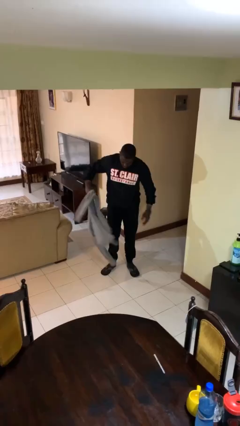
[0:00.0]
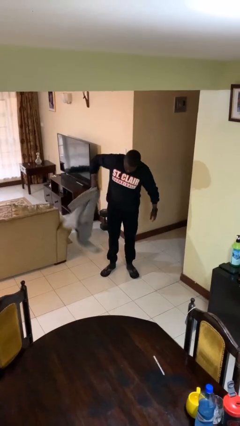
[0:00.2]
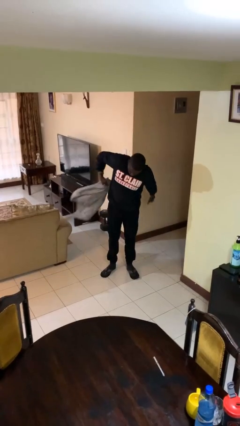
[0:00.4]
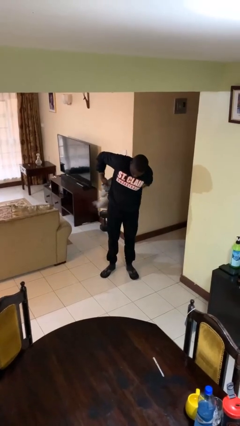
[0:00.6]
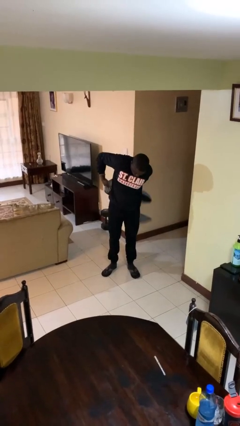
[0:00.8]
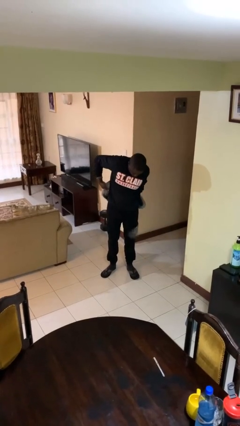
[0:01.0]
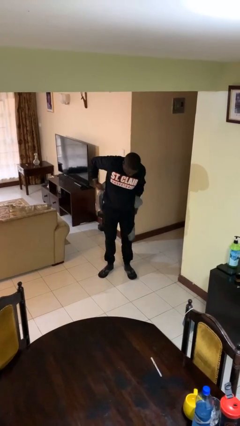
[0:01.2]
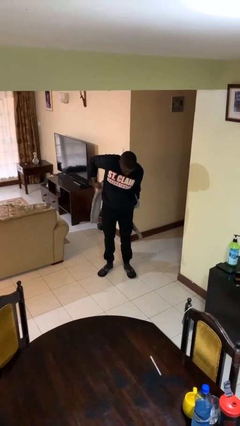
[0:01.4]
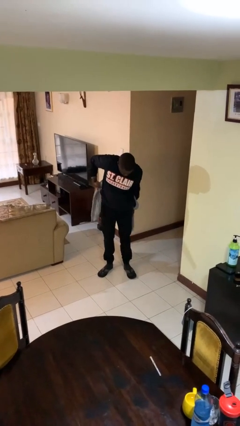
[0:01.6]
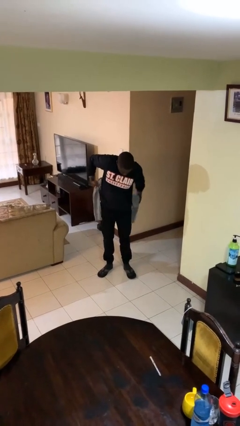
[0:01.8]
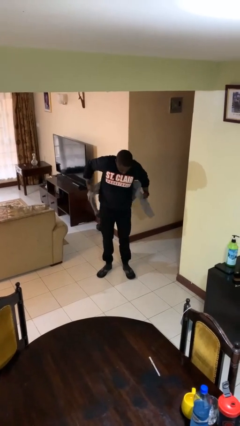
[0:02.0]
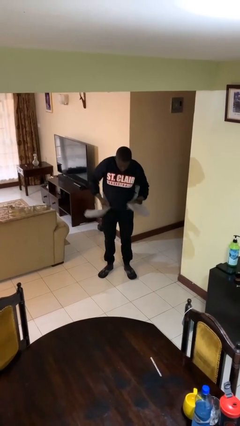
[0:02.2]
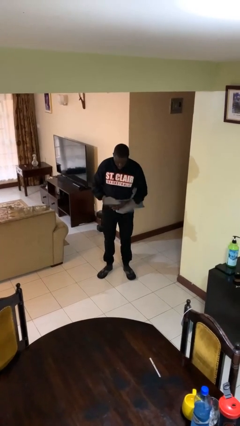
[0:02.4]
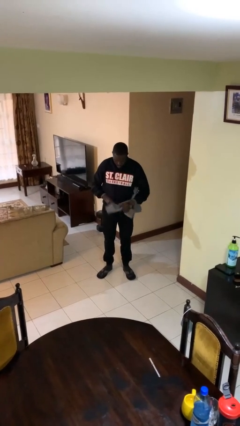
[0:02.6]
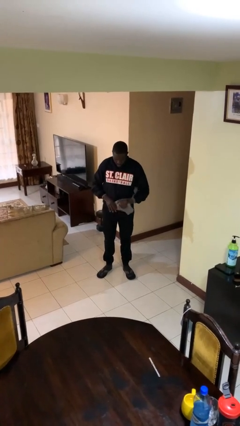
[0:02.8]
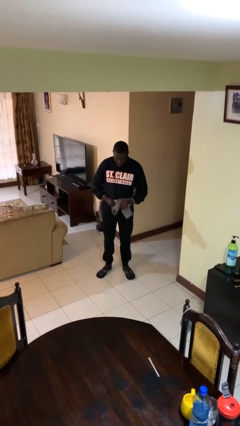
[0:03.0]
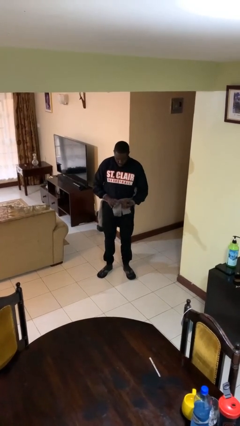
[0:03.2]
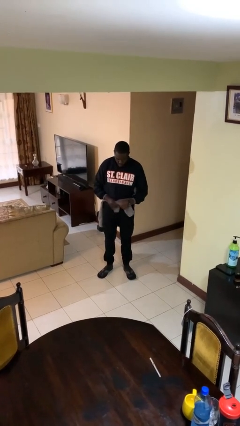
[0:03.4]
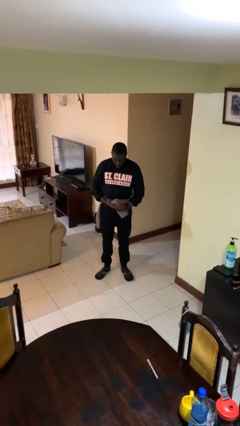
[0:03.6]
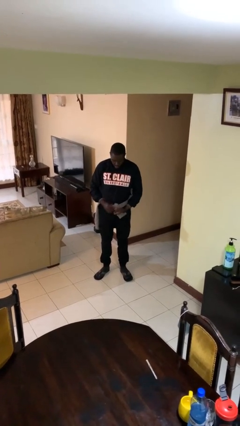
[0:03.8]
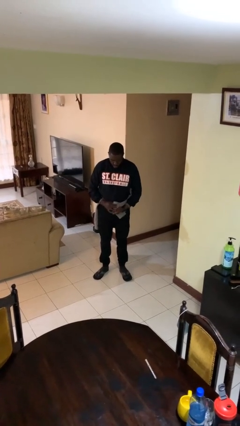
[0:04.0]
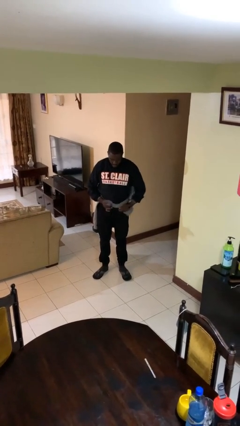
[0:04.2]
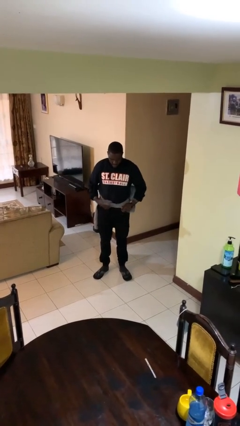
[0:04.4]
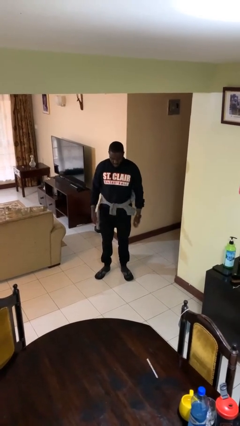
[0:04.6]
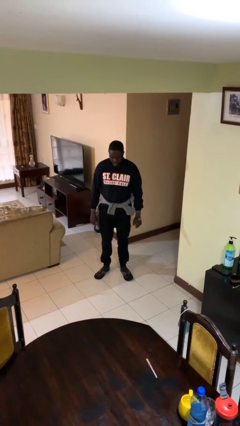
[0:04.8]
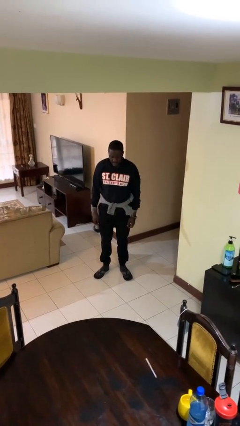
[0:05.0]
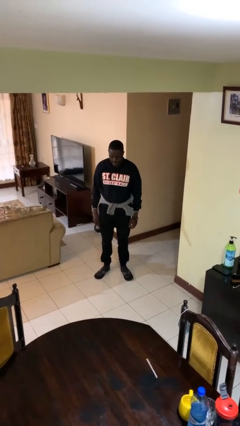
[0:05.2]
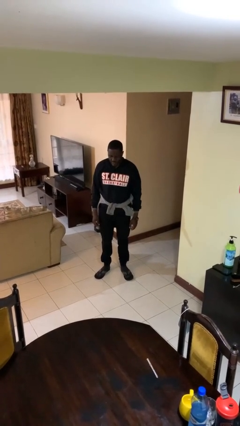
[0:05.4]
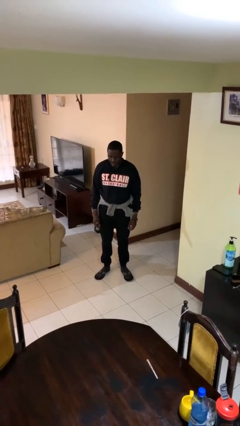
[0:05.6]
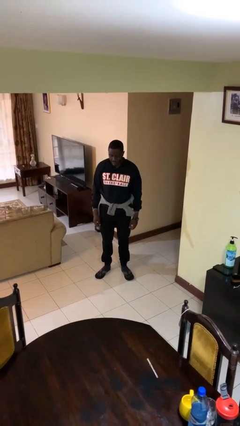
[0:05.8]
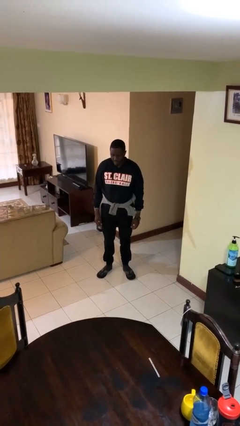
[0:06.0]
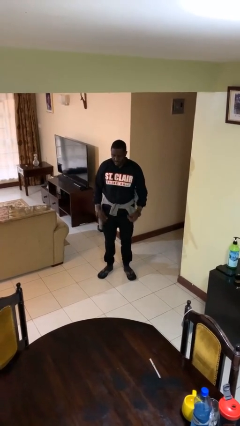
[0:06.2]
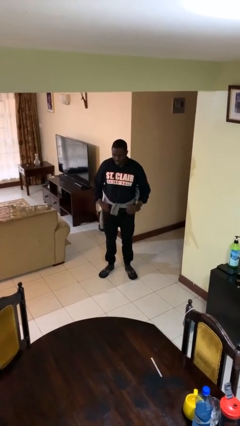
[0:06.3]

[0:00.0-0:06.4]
person ties jacket around waist

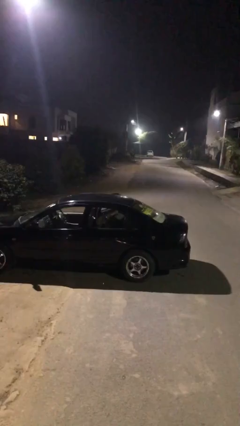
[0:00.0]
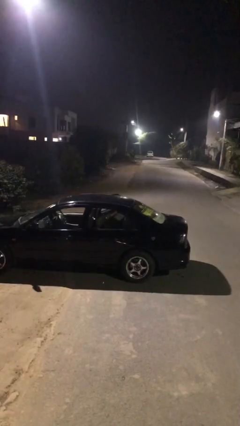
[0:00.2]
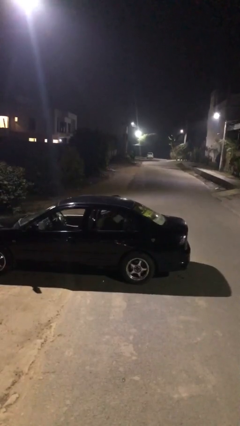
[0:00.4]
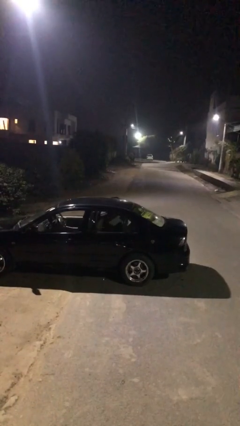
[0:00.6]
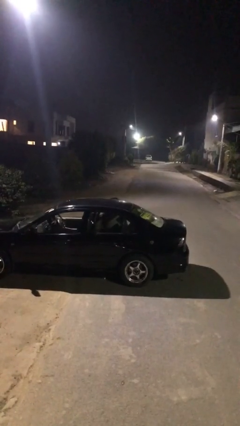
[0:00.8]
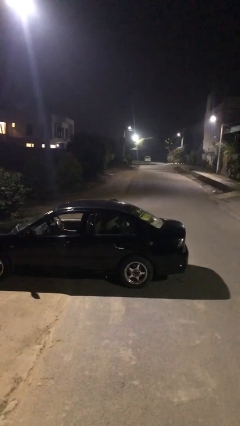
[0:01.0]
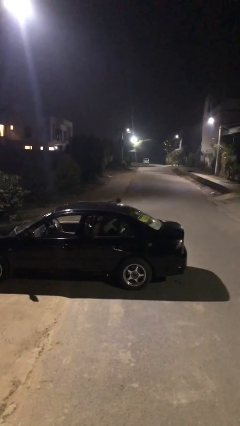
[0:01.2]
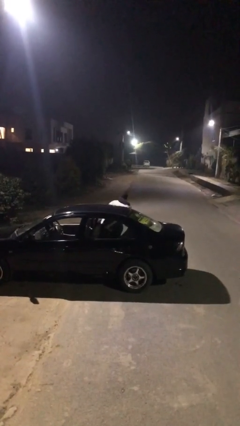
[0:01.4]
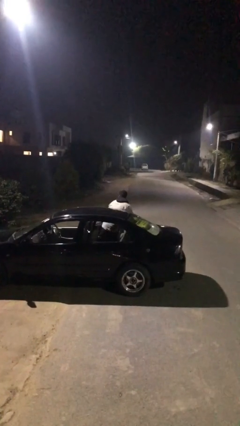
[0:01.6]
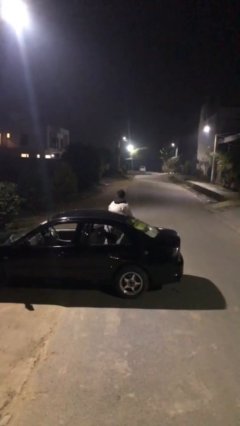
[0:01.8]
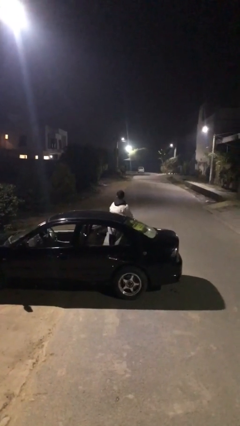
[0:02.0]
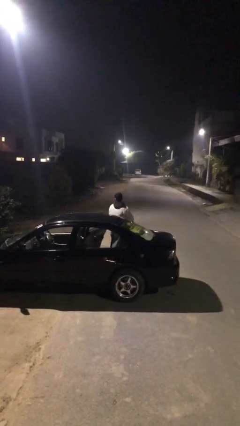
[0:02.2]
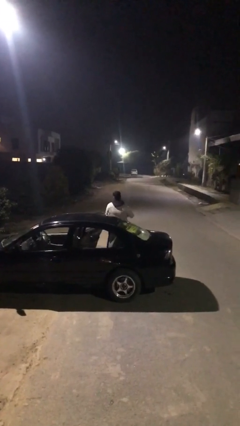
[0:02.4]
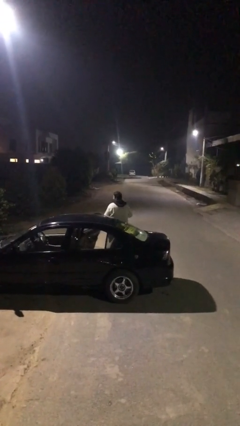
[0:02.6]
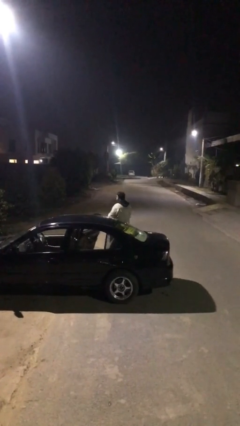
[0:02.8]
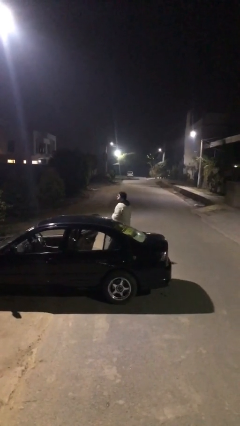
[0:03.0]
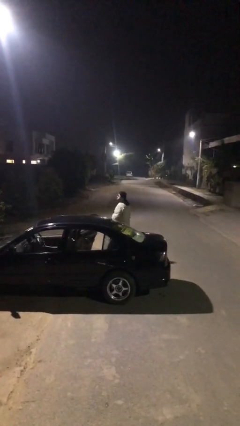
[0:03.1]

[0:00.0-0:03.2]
person exits car

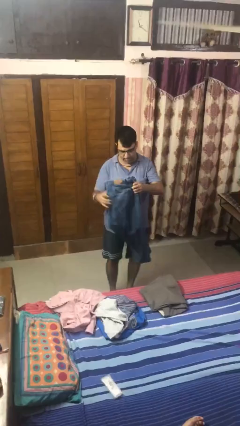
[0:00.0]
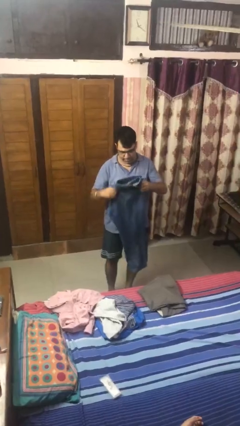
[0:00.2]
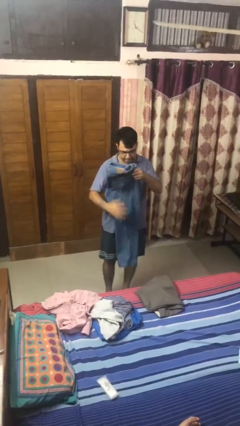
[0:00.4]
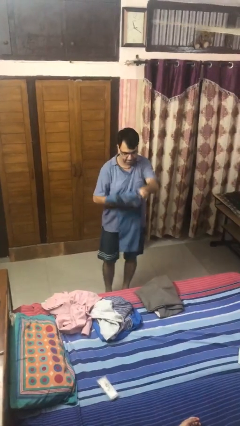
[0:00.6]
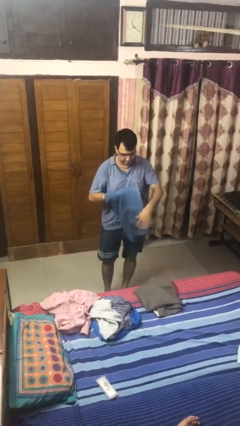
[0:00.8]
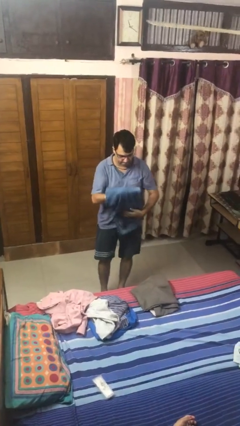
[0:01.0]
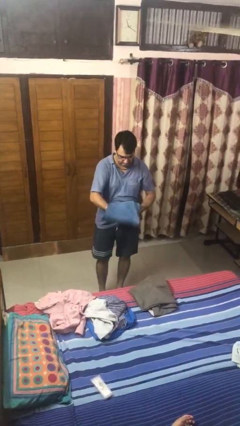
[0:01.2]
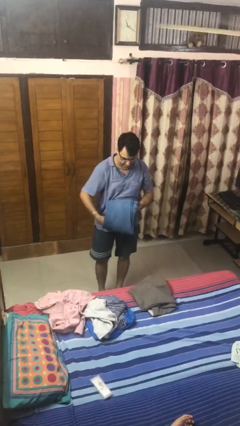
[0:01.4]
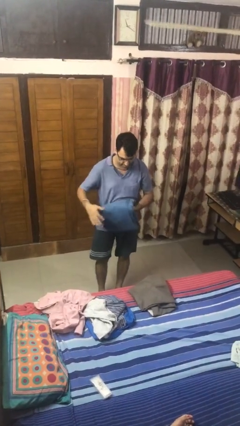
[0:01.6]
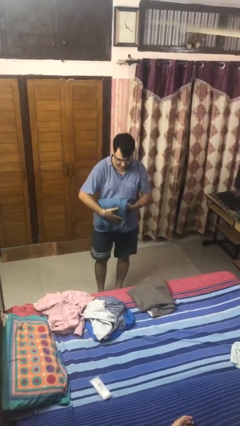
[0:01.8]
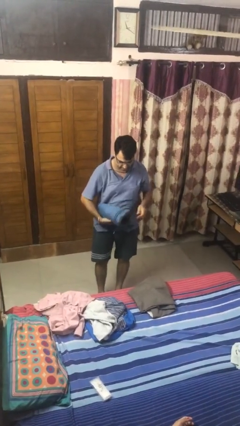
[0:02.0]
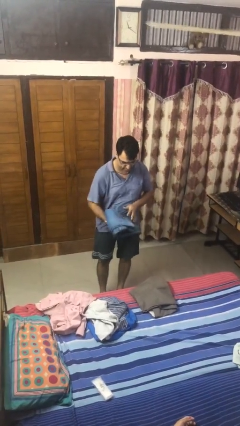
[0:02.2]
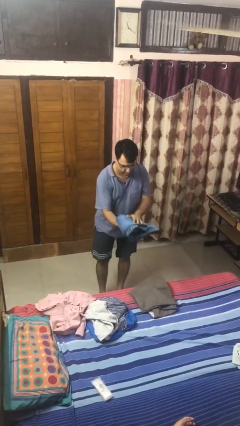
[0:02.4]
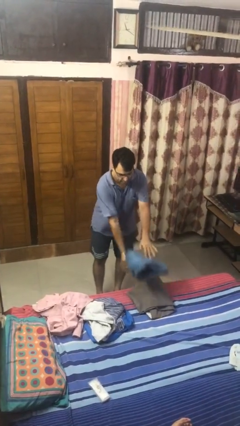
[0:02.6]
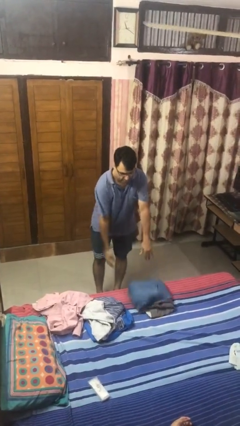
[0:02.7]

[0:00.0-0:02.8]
person folds pants

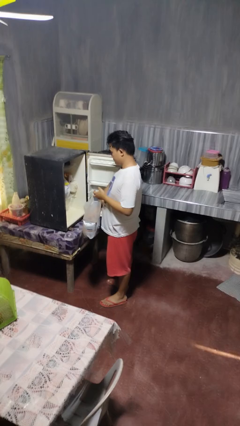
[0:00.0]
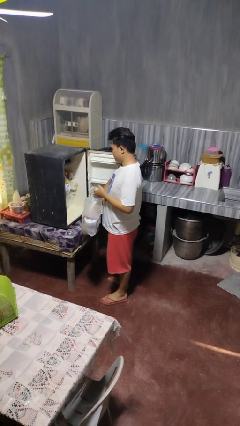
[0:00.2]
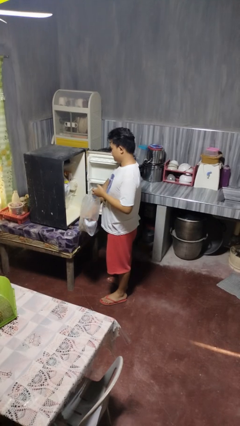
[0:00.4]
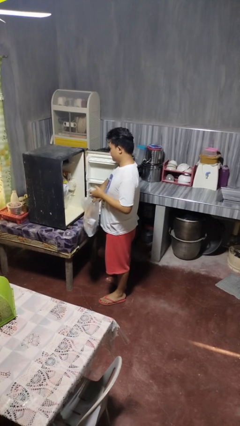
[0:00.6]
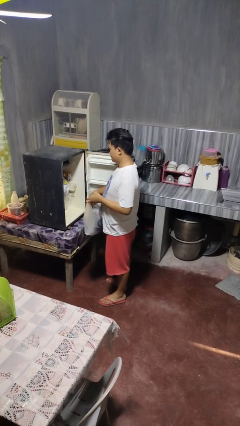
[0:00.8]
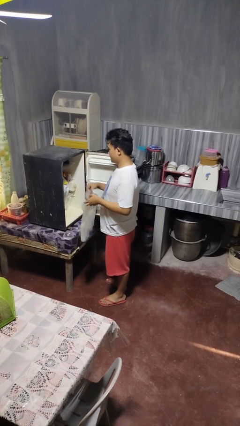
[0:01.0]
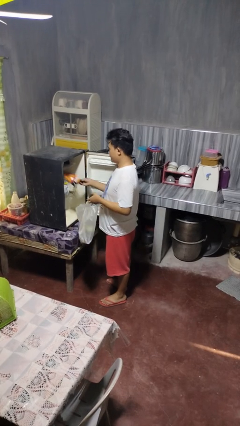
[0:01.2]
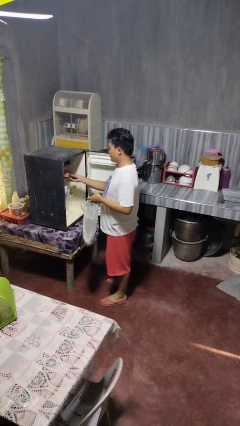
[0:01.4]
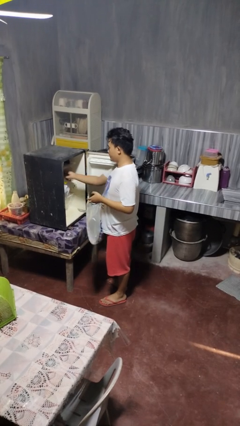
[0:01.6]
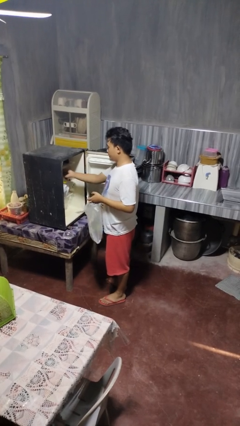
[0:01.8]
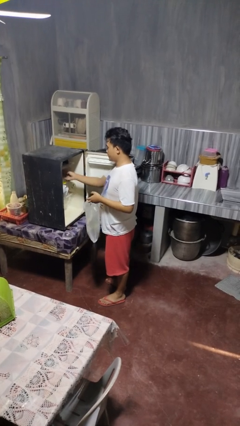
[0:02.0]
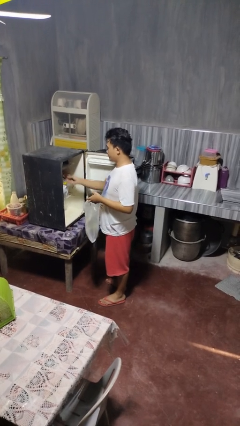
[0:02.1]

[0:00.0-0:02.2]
person loads groceries into refrigerator

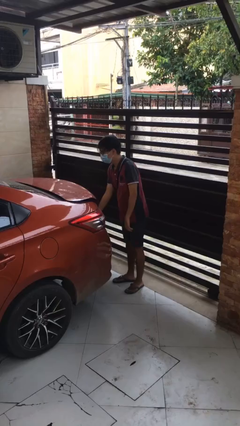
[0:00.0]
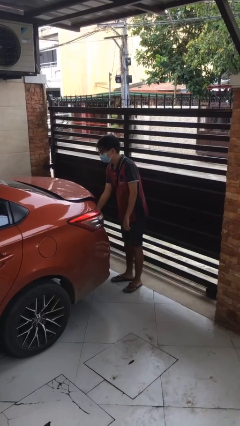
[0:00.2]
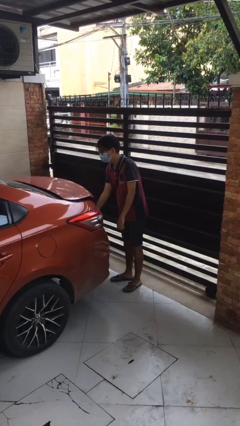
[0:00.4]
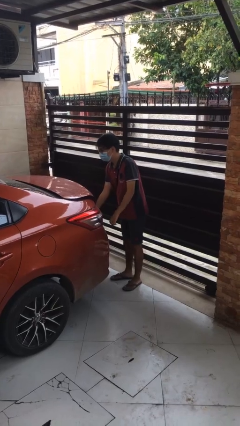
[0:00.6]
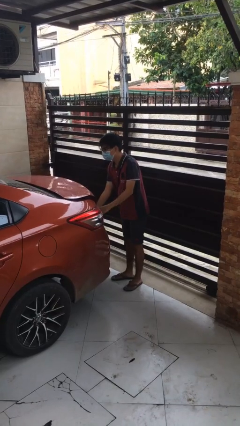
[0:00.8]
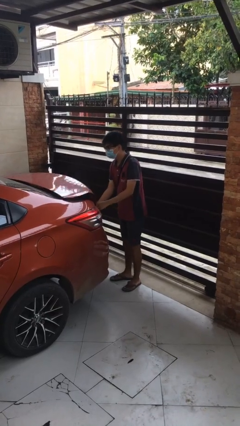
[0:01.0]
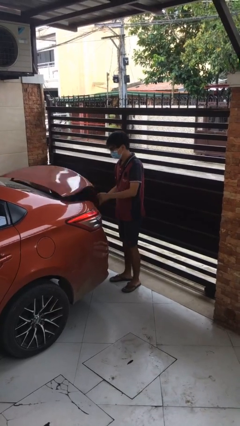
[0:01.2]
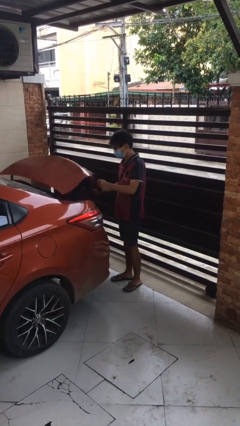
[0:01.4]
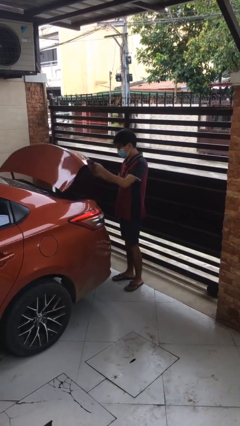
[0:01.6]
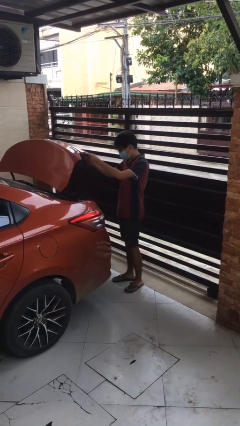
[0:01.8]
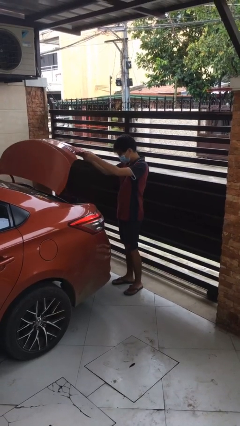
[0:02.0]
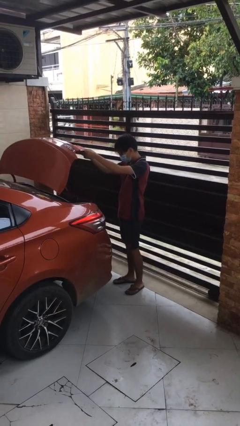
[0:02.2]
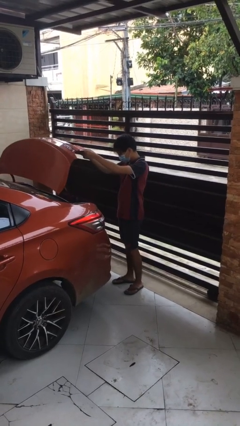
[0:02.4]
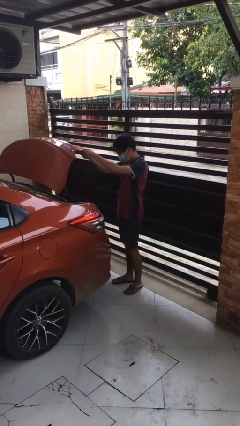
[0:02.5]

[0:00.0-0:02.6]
person opens car trunk
